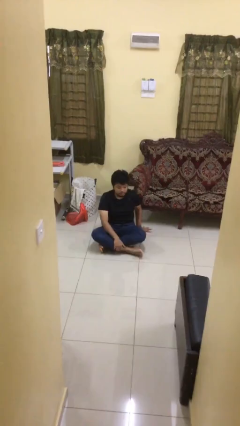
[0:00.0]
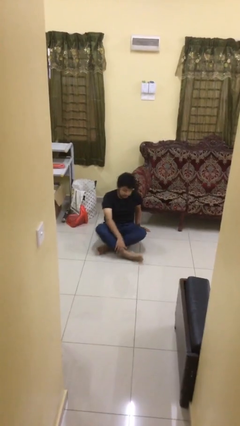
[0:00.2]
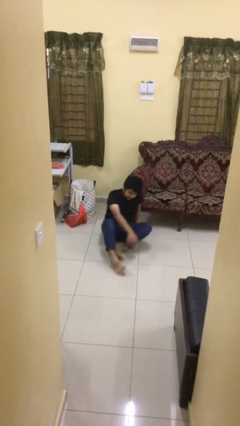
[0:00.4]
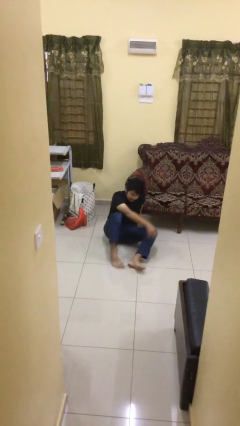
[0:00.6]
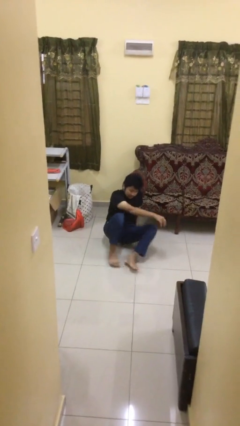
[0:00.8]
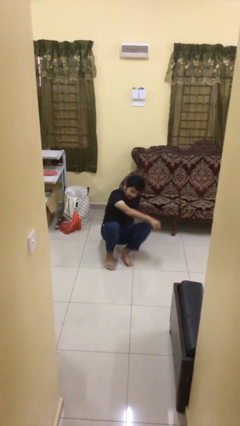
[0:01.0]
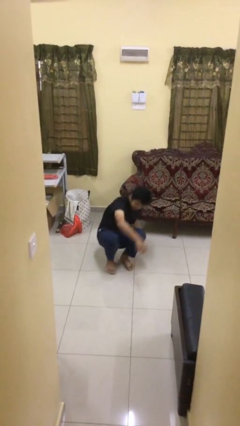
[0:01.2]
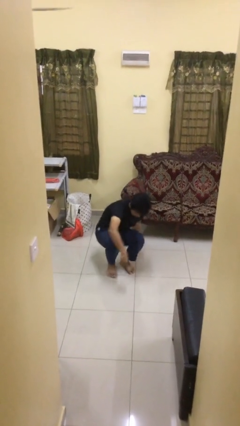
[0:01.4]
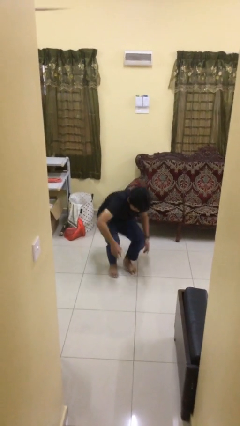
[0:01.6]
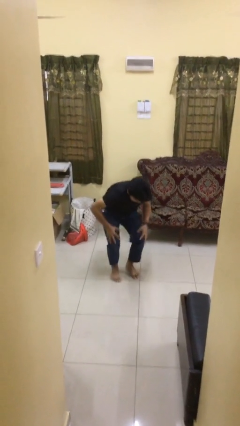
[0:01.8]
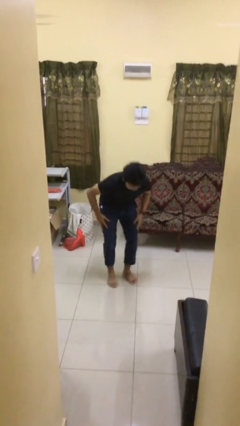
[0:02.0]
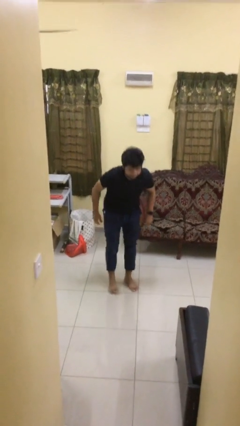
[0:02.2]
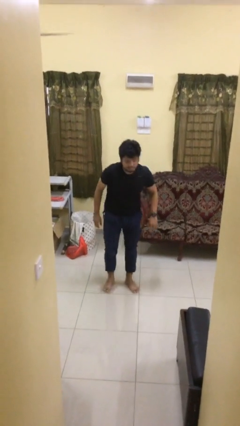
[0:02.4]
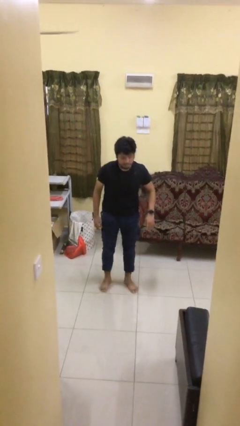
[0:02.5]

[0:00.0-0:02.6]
person stands up from floor

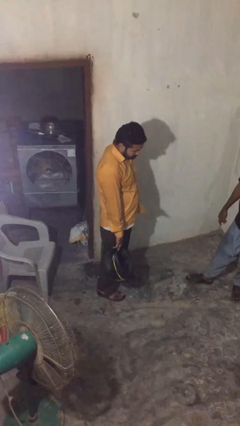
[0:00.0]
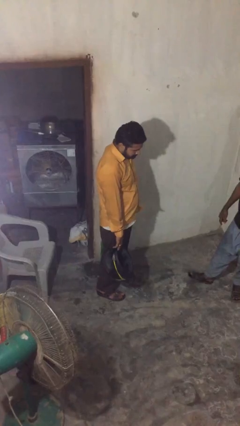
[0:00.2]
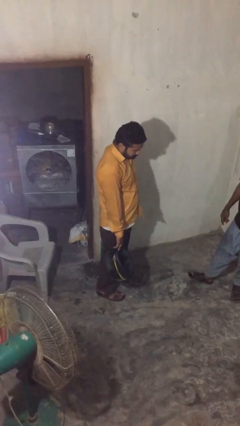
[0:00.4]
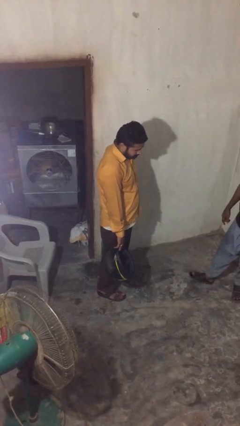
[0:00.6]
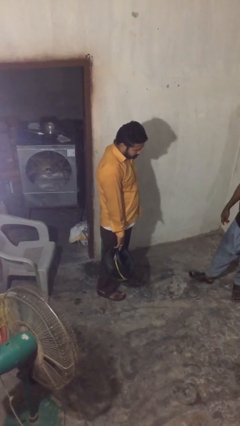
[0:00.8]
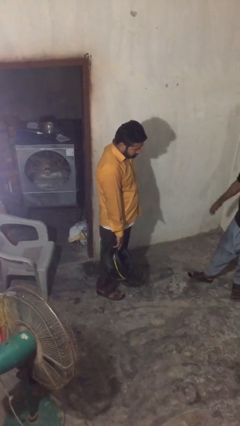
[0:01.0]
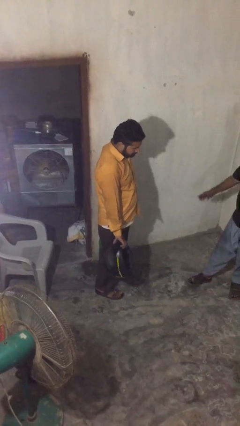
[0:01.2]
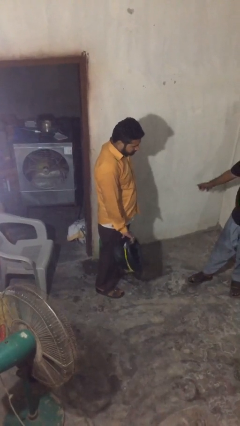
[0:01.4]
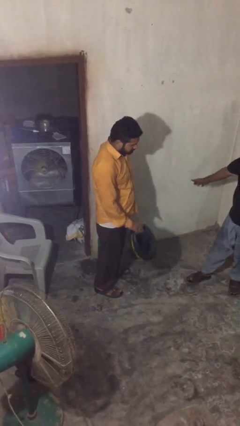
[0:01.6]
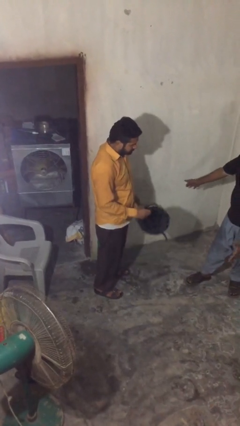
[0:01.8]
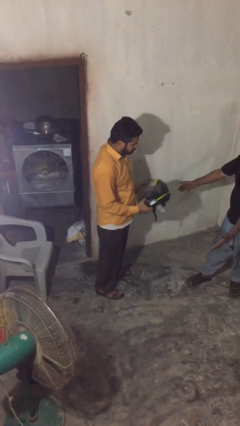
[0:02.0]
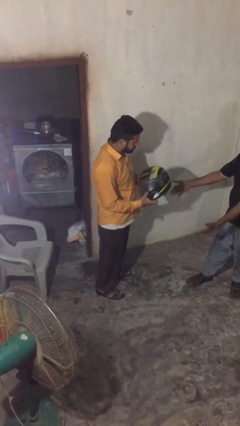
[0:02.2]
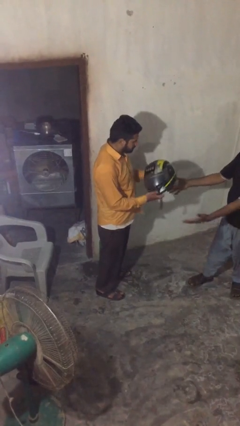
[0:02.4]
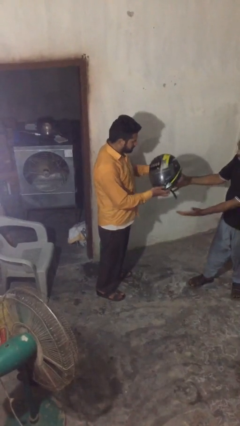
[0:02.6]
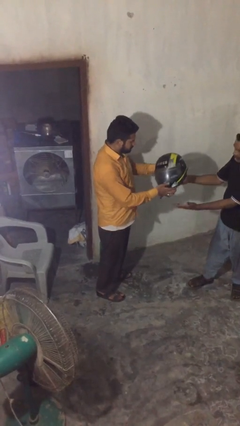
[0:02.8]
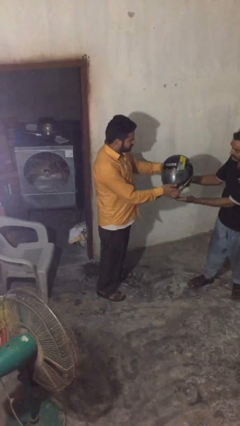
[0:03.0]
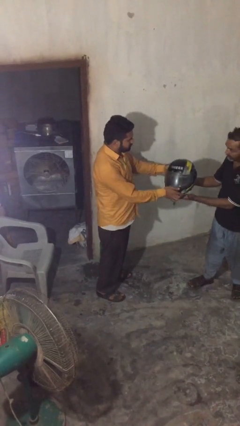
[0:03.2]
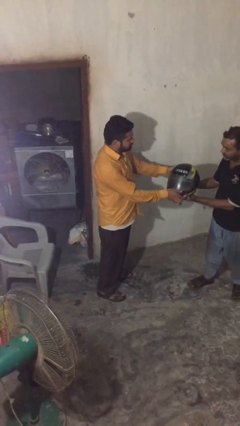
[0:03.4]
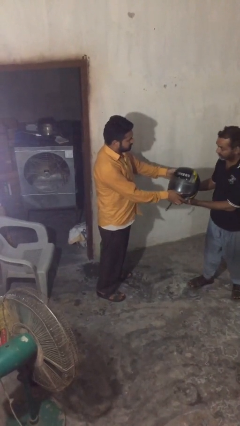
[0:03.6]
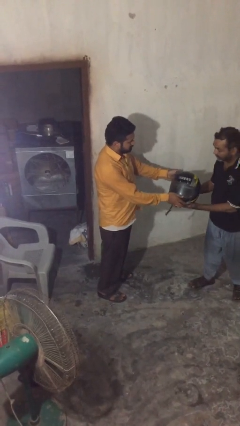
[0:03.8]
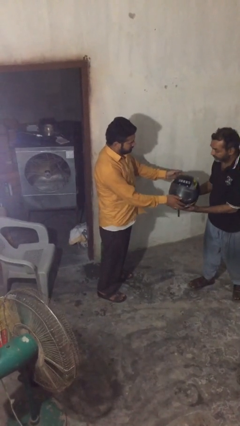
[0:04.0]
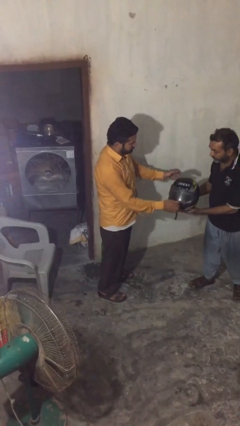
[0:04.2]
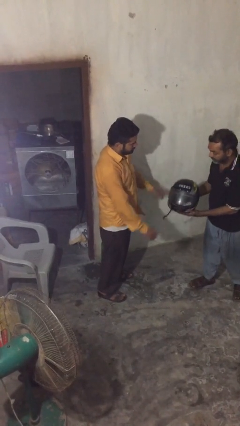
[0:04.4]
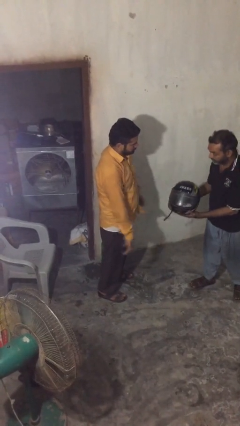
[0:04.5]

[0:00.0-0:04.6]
person transfers object to person

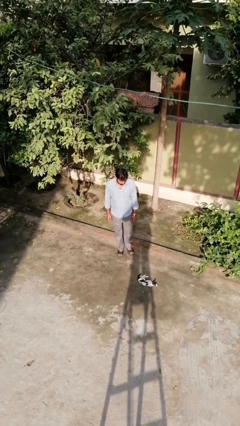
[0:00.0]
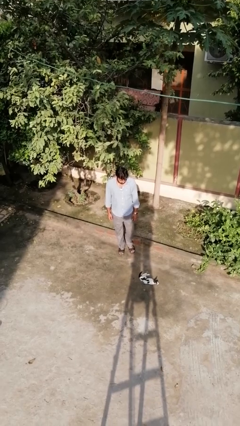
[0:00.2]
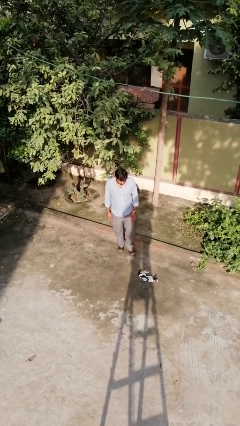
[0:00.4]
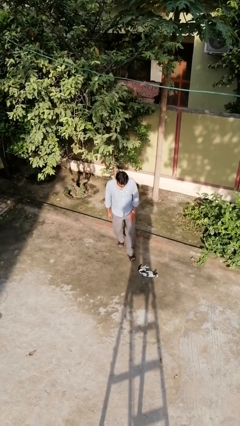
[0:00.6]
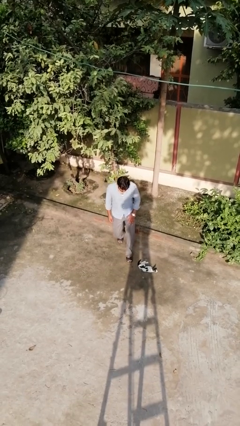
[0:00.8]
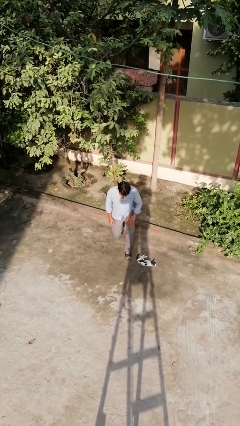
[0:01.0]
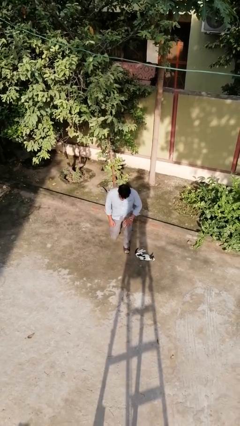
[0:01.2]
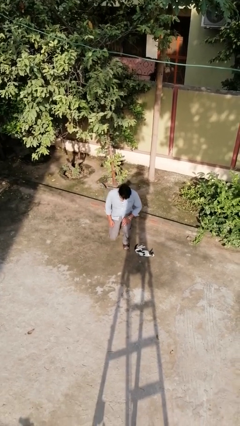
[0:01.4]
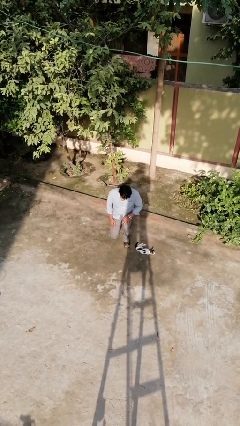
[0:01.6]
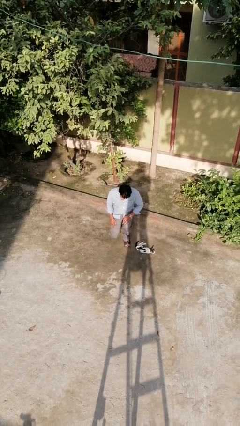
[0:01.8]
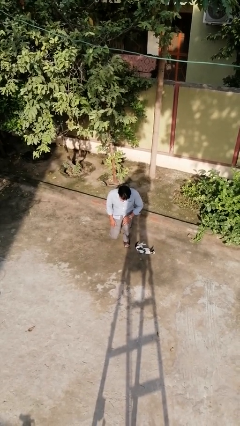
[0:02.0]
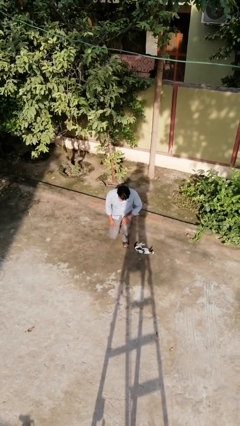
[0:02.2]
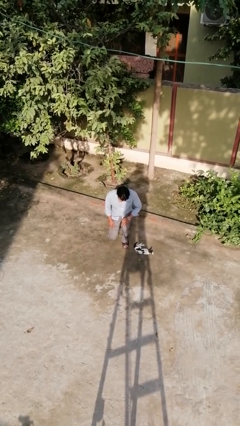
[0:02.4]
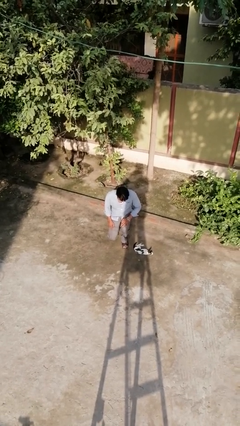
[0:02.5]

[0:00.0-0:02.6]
person kneels

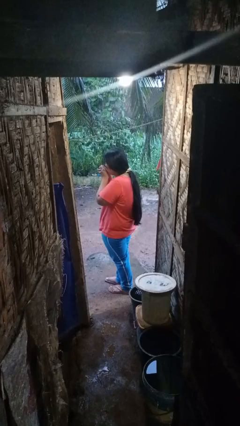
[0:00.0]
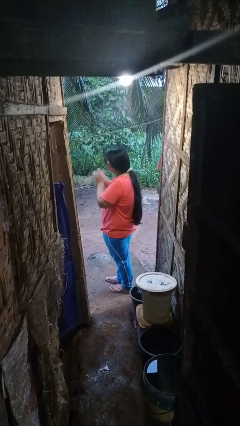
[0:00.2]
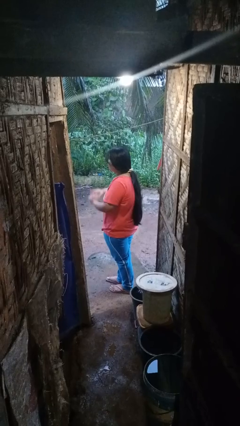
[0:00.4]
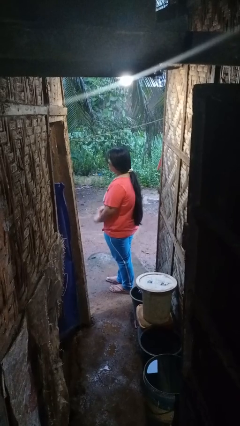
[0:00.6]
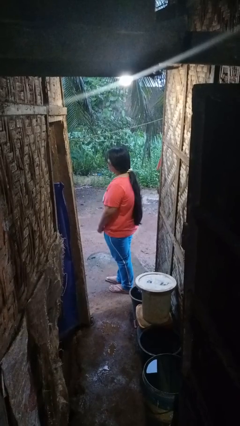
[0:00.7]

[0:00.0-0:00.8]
person blows into hands

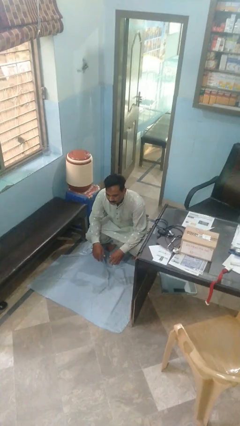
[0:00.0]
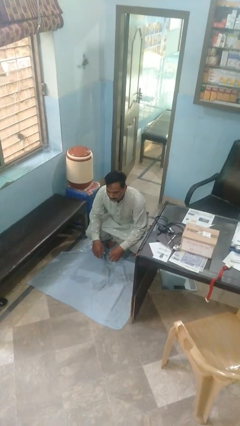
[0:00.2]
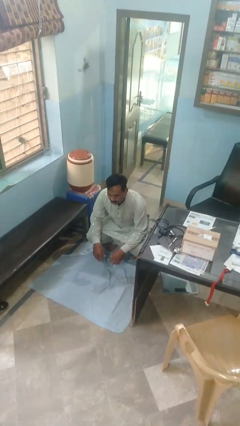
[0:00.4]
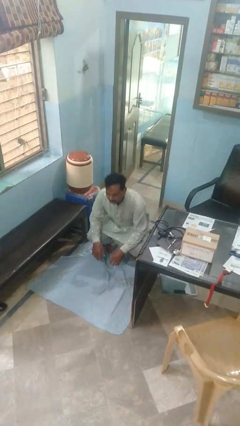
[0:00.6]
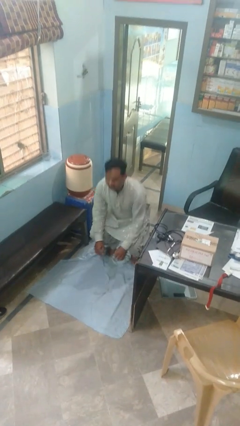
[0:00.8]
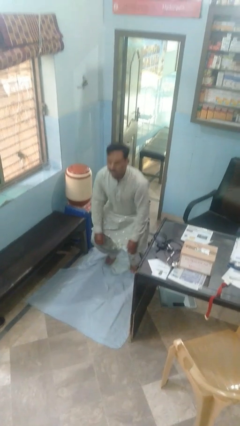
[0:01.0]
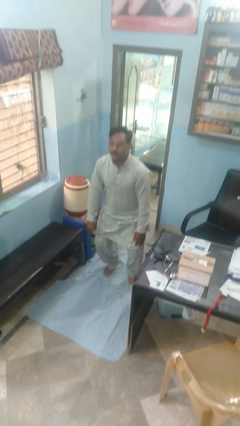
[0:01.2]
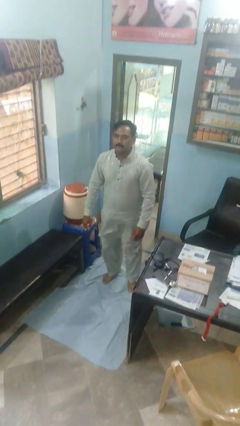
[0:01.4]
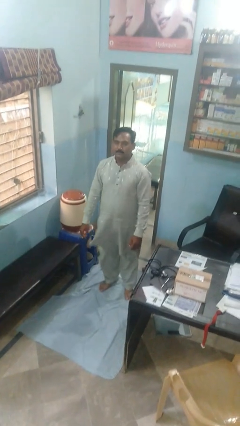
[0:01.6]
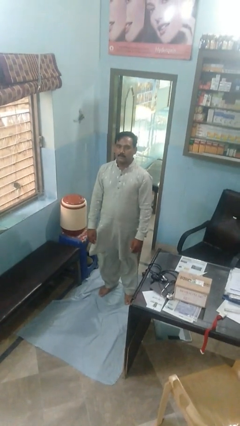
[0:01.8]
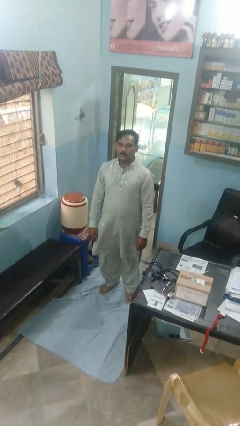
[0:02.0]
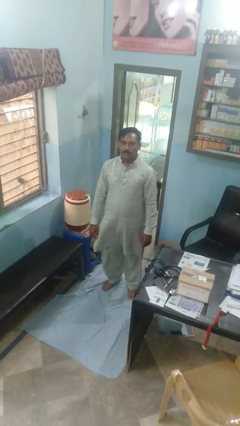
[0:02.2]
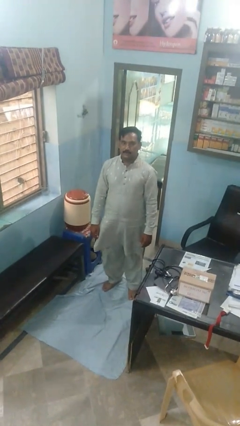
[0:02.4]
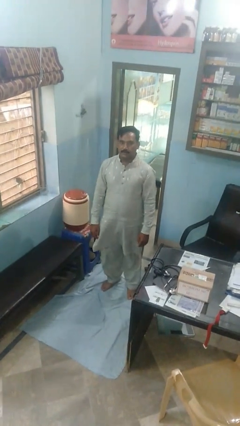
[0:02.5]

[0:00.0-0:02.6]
person stands up

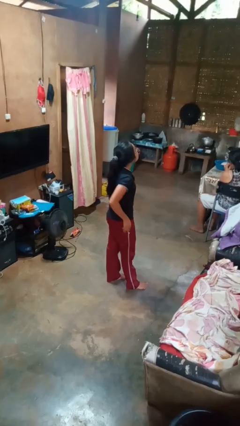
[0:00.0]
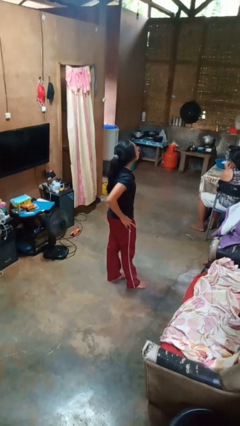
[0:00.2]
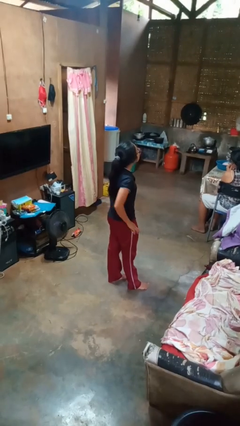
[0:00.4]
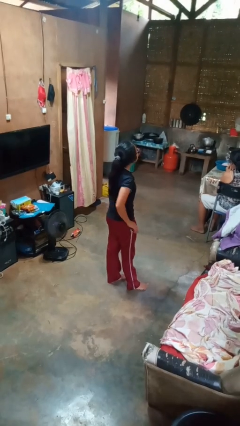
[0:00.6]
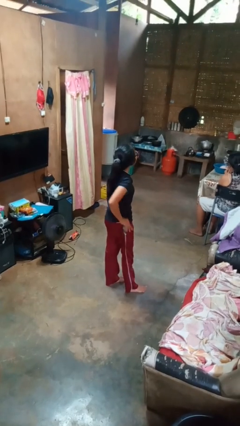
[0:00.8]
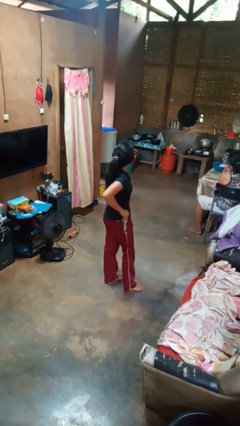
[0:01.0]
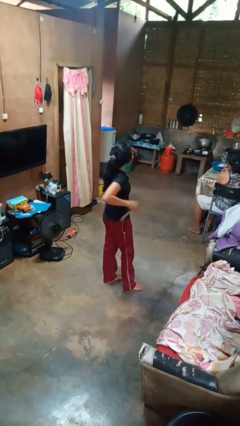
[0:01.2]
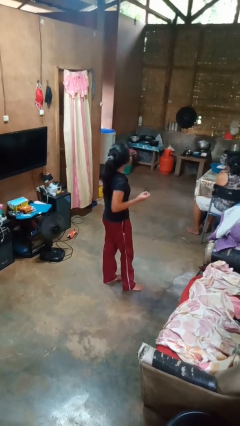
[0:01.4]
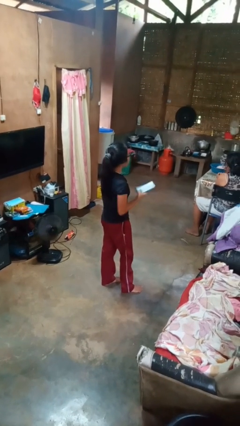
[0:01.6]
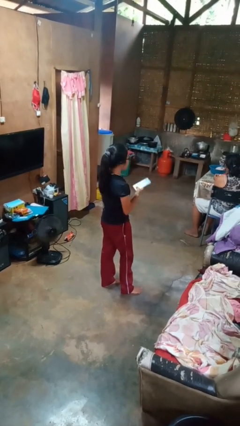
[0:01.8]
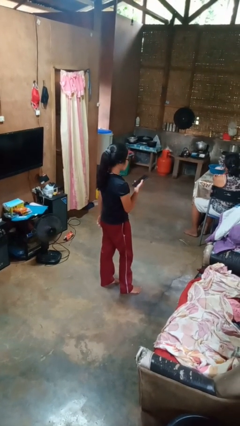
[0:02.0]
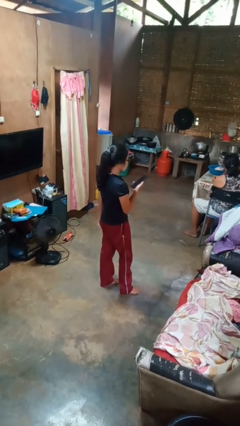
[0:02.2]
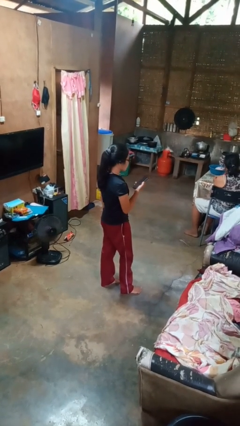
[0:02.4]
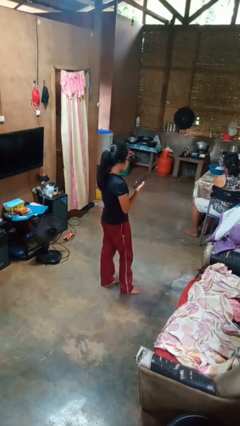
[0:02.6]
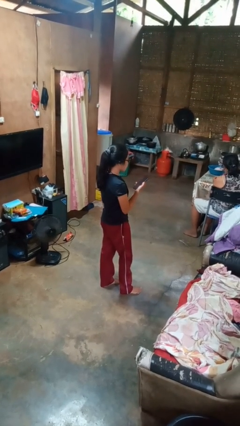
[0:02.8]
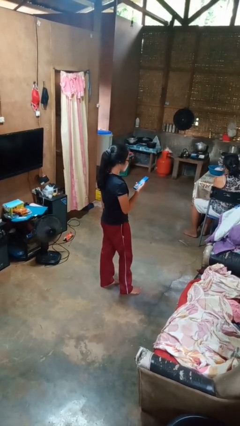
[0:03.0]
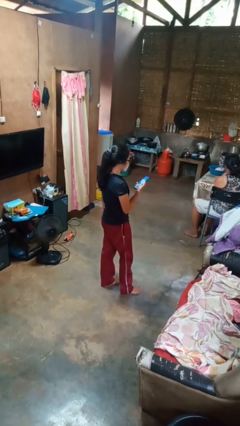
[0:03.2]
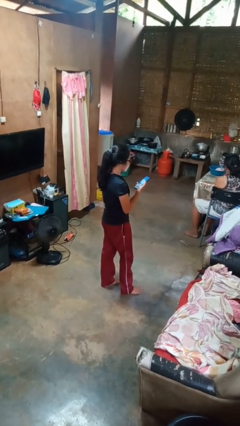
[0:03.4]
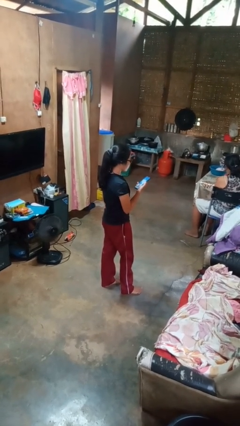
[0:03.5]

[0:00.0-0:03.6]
person takes phone from pocket

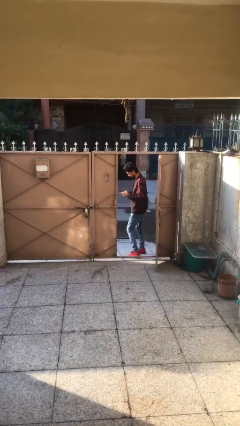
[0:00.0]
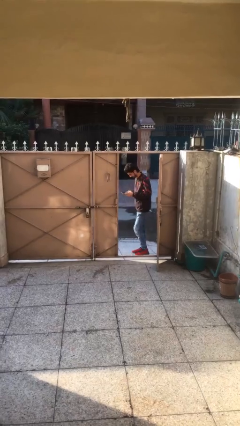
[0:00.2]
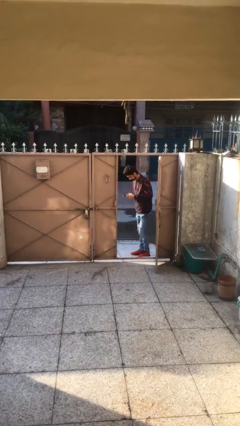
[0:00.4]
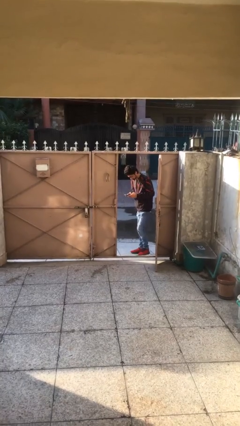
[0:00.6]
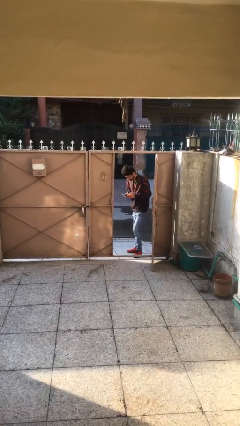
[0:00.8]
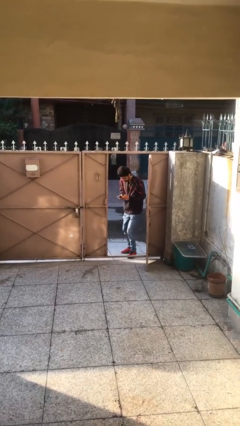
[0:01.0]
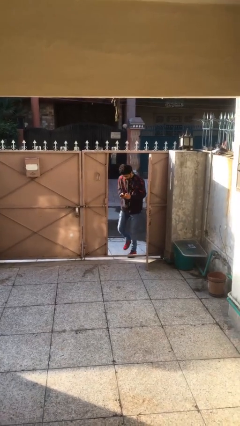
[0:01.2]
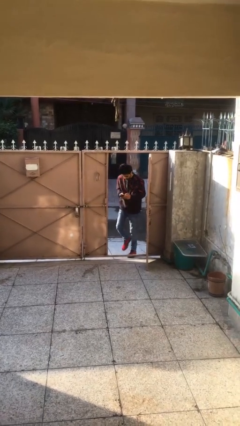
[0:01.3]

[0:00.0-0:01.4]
person enters scene through structure
